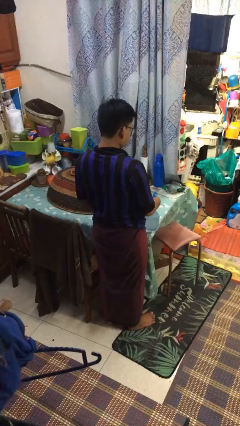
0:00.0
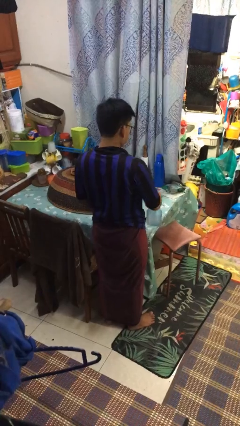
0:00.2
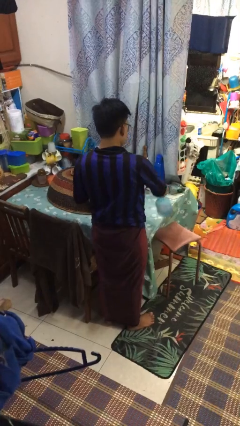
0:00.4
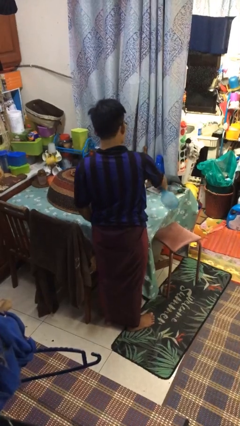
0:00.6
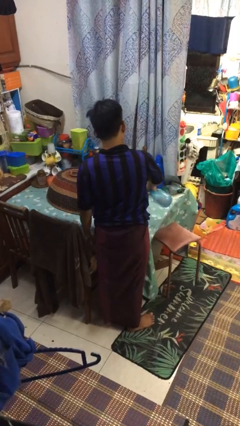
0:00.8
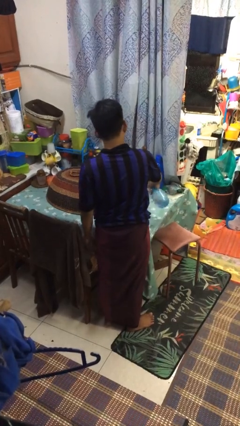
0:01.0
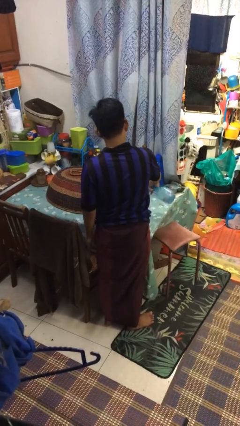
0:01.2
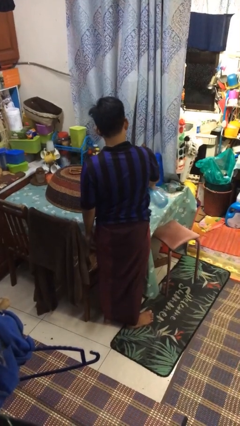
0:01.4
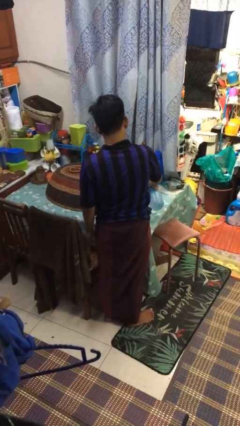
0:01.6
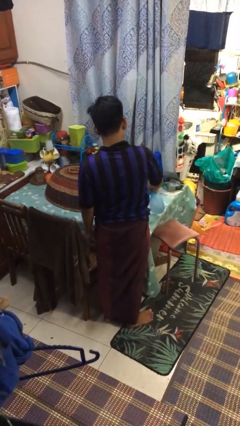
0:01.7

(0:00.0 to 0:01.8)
person sprays from bottle

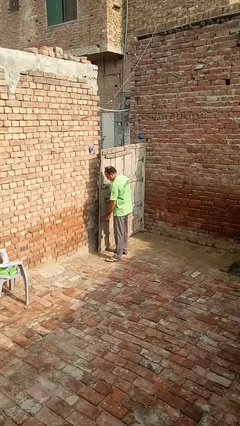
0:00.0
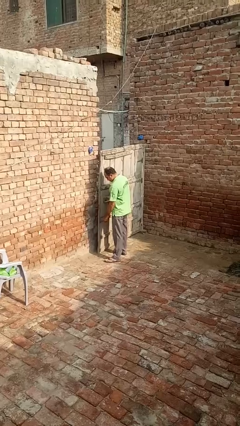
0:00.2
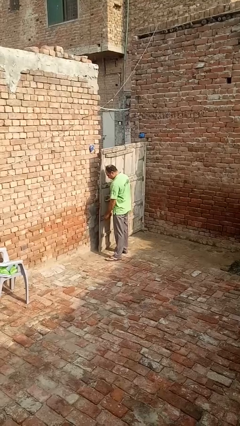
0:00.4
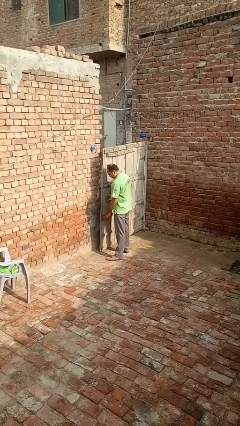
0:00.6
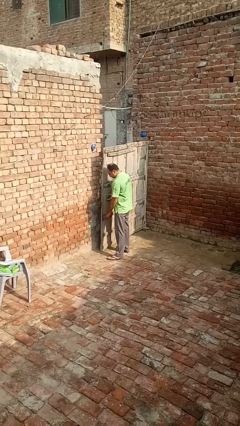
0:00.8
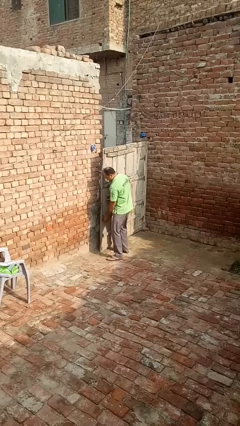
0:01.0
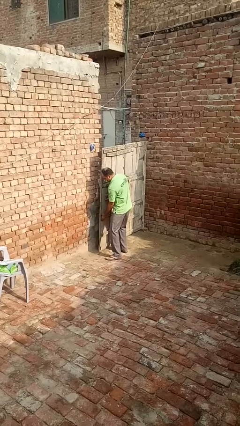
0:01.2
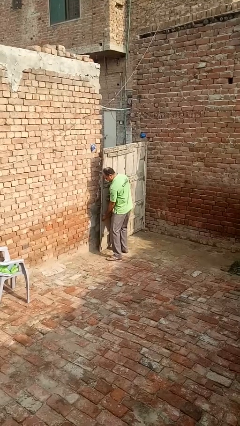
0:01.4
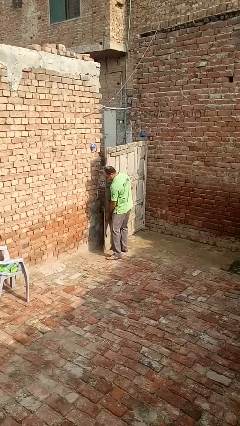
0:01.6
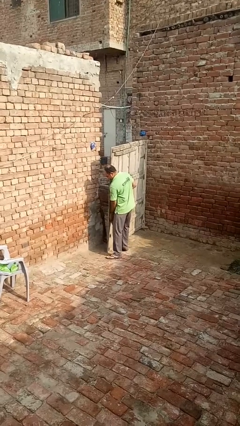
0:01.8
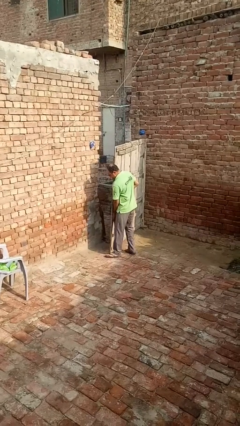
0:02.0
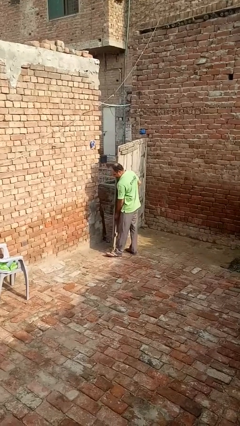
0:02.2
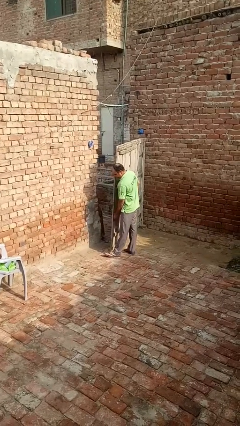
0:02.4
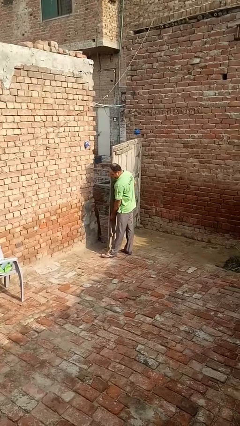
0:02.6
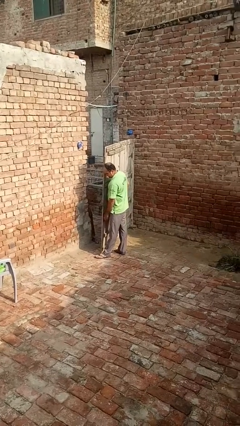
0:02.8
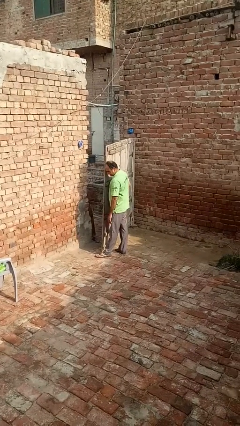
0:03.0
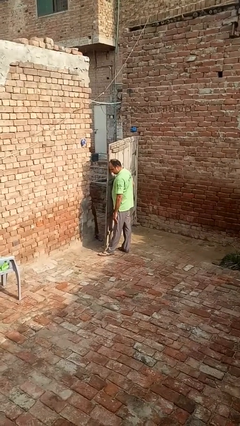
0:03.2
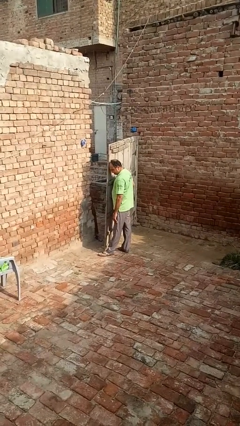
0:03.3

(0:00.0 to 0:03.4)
person opens gate

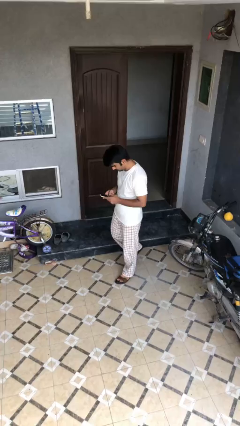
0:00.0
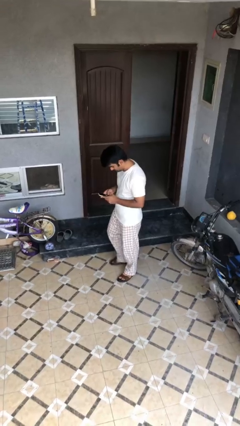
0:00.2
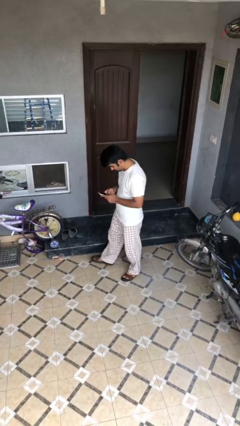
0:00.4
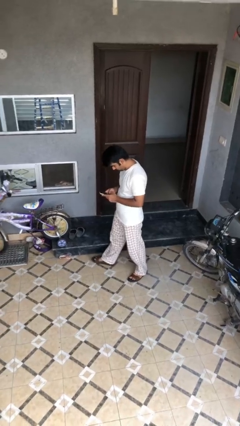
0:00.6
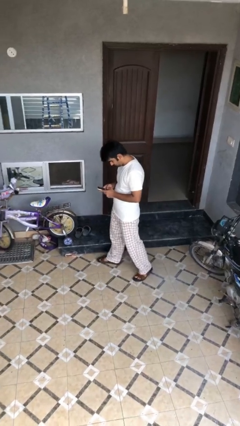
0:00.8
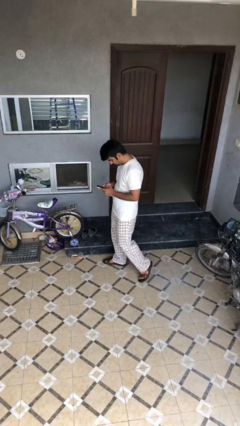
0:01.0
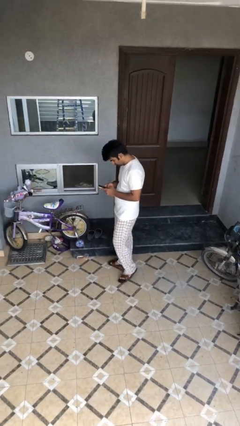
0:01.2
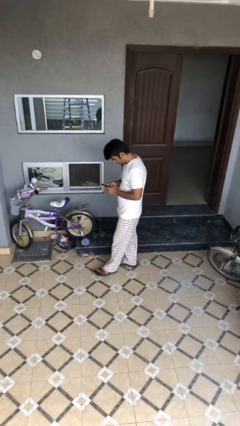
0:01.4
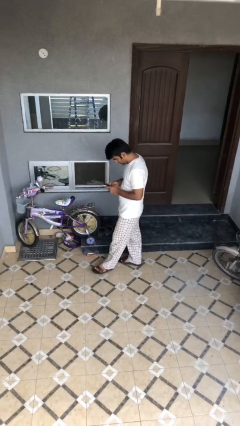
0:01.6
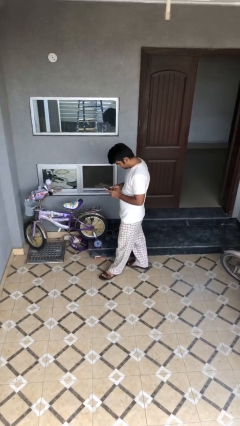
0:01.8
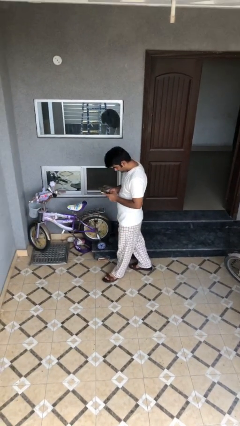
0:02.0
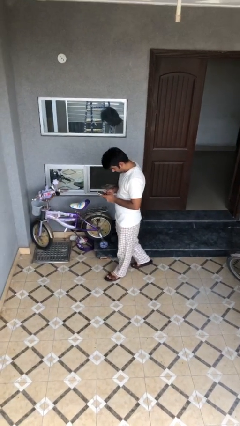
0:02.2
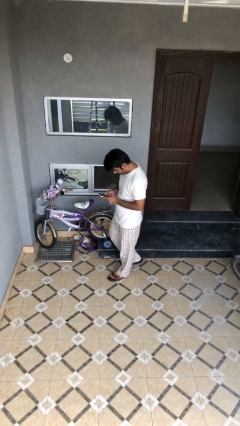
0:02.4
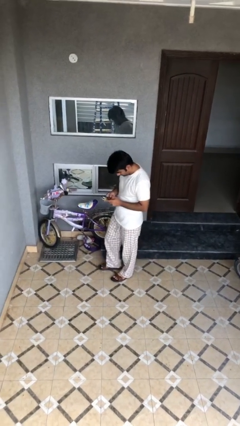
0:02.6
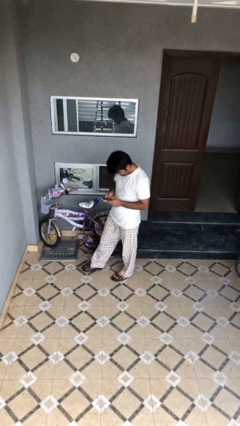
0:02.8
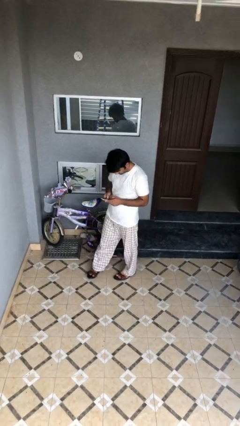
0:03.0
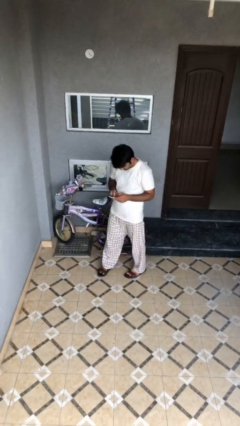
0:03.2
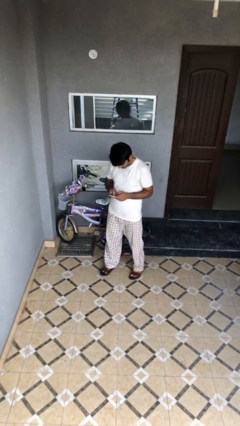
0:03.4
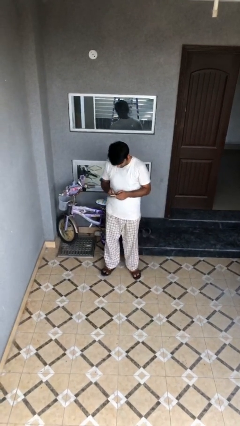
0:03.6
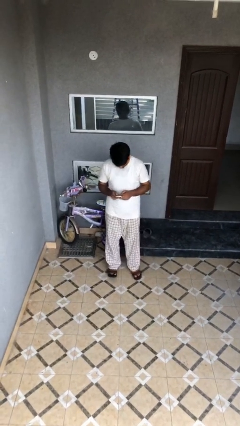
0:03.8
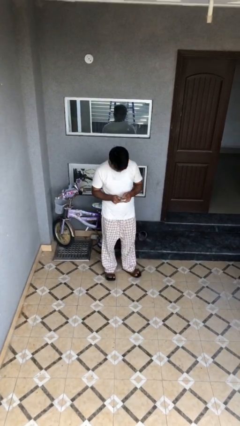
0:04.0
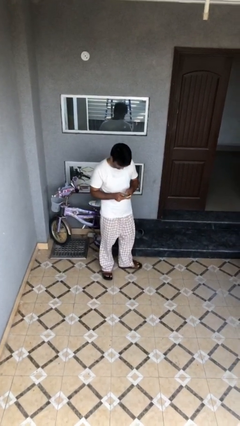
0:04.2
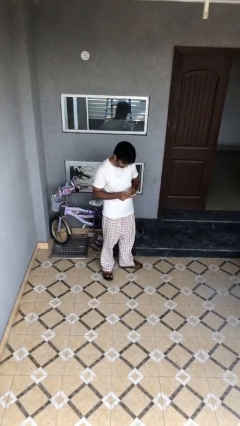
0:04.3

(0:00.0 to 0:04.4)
person texts on phone

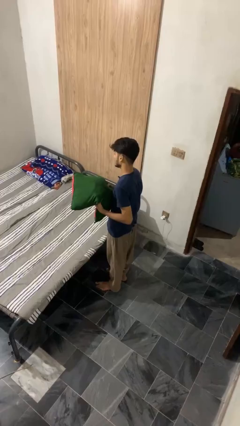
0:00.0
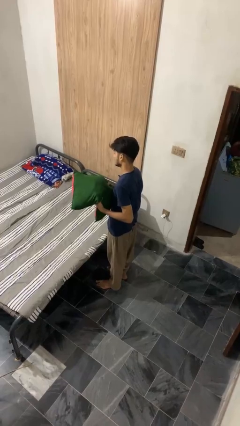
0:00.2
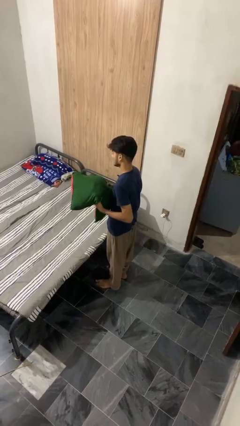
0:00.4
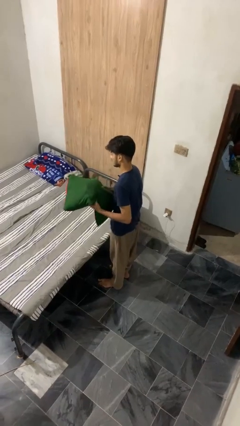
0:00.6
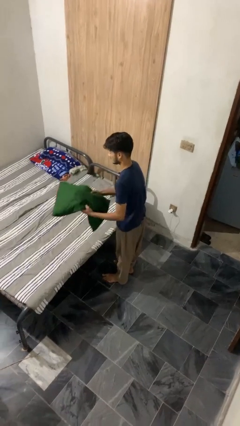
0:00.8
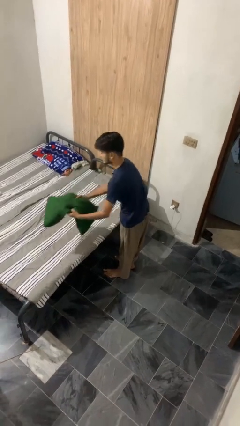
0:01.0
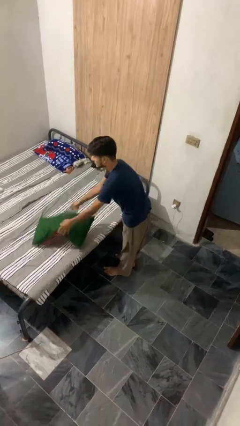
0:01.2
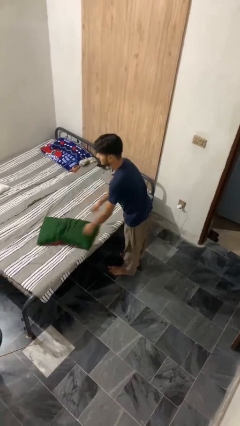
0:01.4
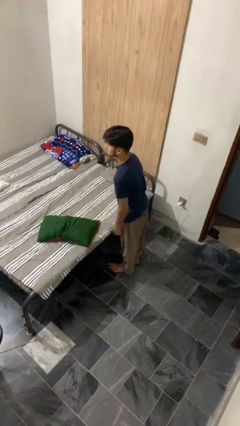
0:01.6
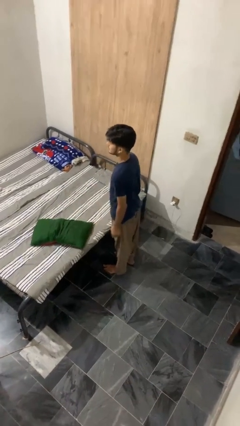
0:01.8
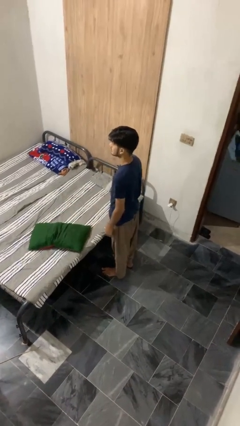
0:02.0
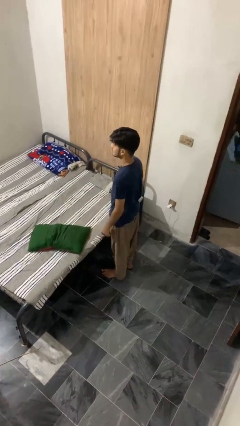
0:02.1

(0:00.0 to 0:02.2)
person puts down object on bed

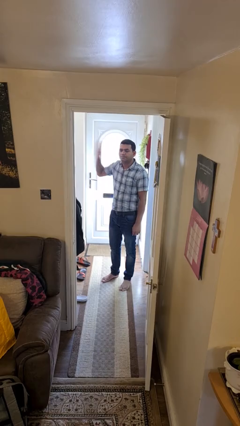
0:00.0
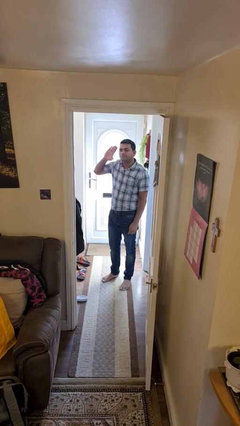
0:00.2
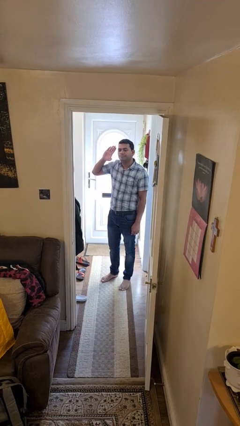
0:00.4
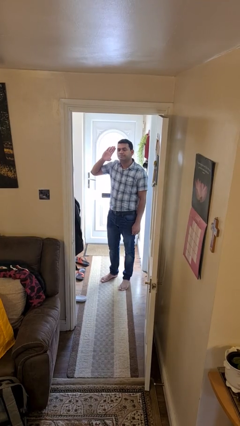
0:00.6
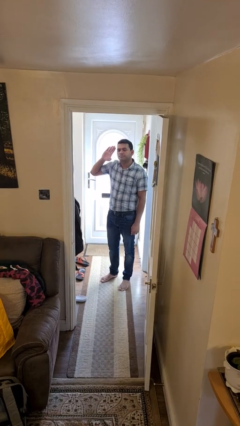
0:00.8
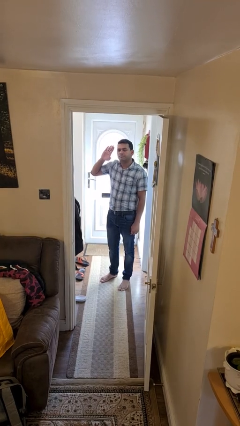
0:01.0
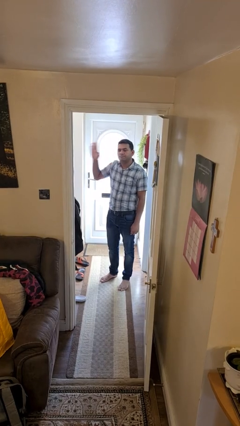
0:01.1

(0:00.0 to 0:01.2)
person salutes

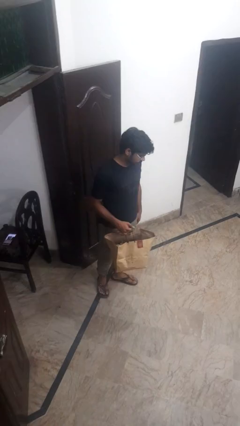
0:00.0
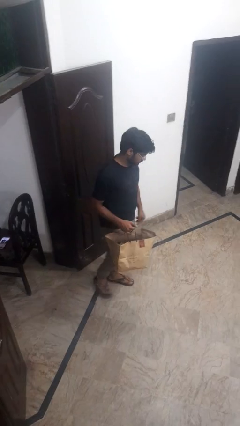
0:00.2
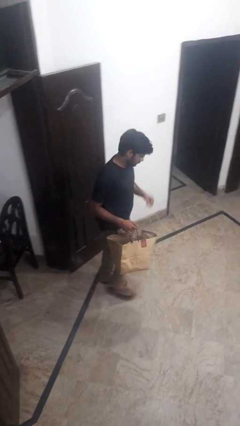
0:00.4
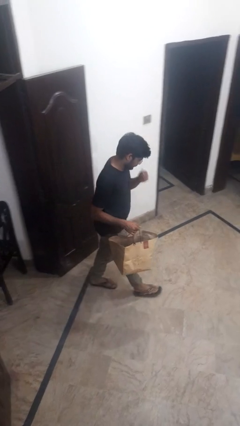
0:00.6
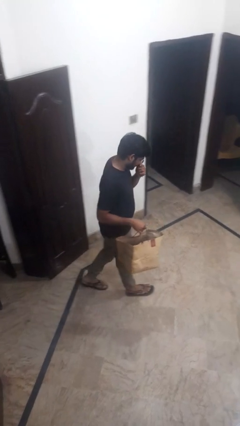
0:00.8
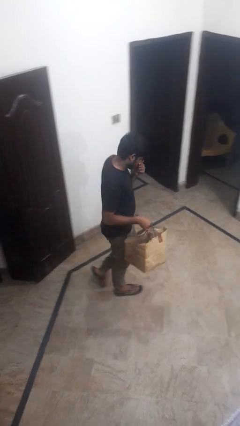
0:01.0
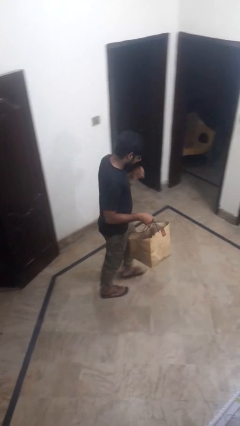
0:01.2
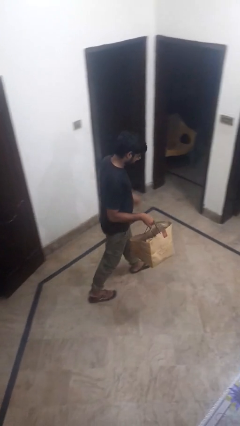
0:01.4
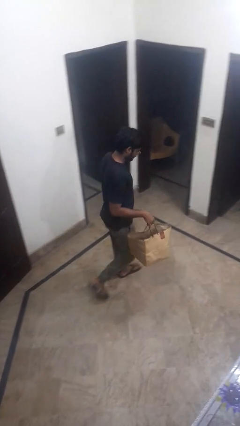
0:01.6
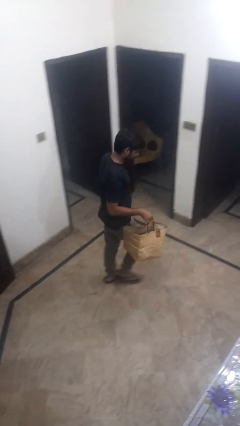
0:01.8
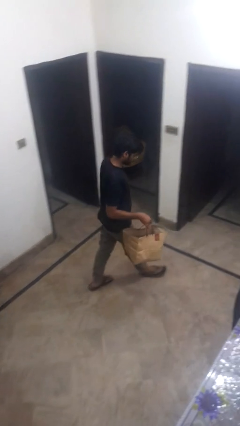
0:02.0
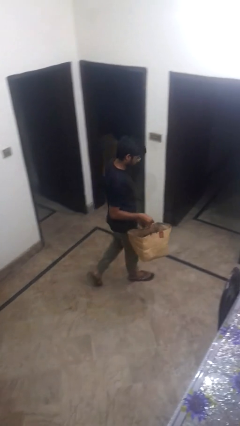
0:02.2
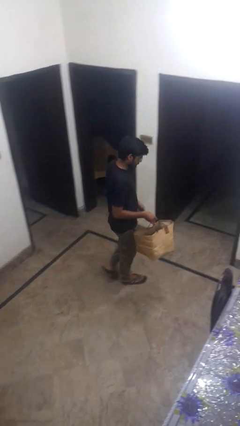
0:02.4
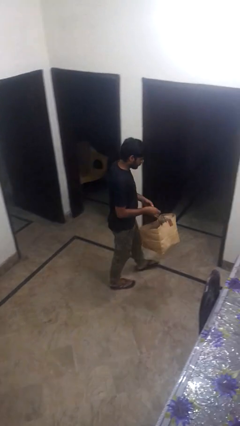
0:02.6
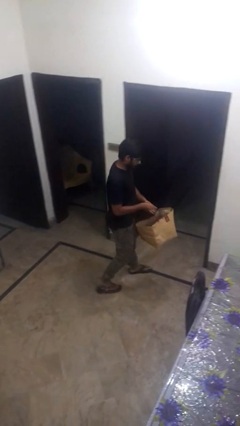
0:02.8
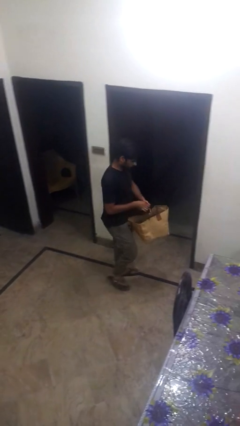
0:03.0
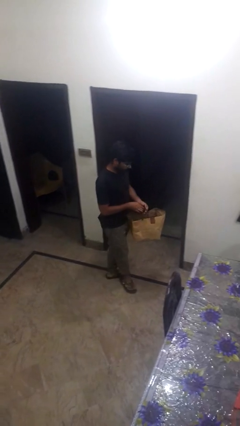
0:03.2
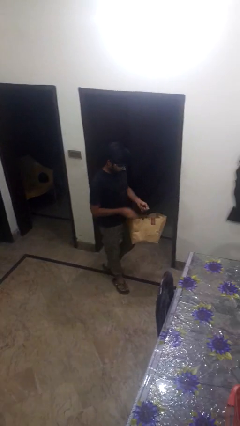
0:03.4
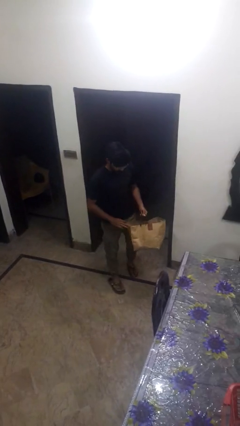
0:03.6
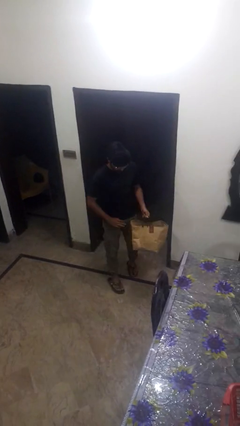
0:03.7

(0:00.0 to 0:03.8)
person carries groceries

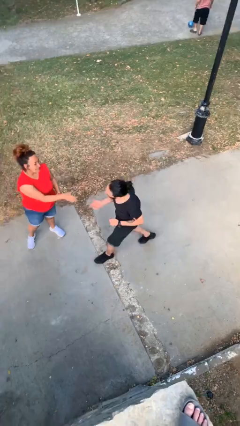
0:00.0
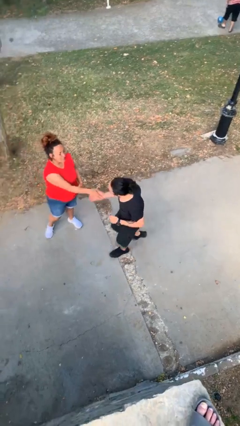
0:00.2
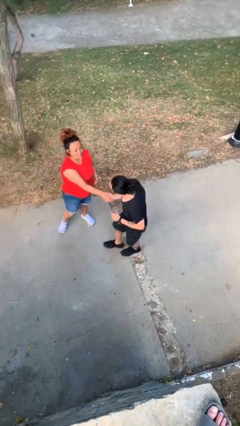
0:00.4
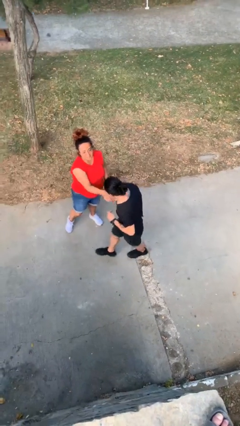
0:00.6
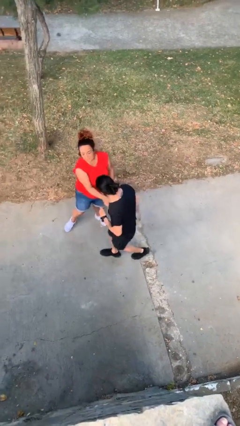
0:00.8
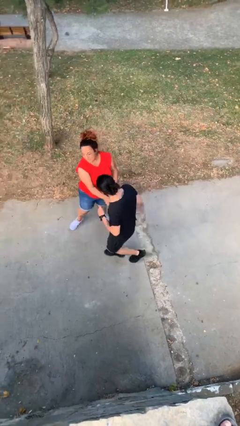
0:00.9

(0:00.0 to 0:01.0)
person shakes hand
